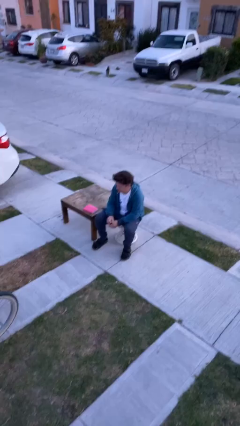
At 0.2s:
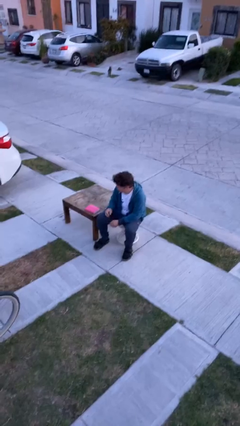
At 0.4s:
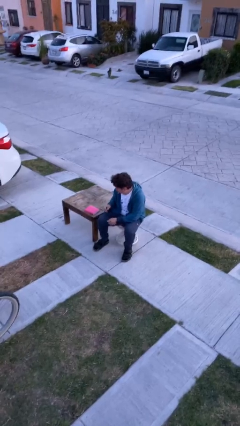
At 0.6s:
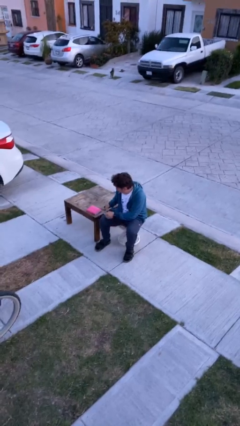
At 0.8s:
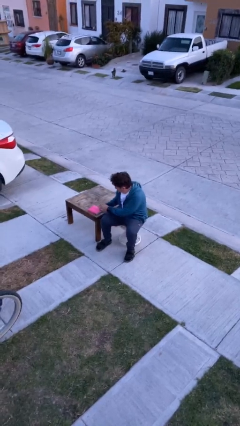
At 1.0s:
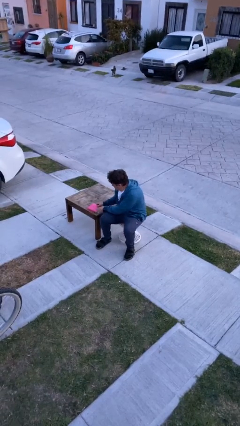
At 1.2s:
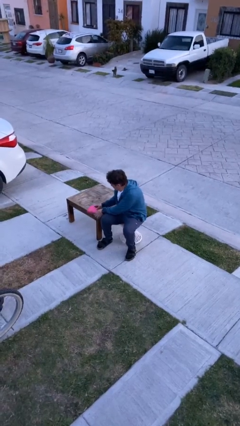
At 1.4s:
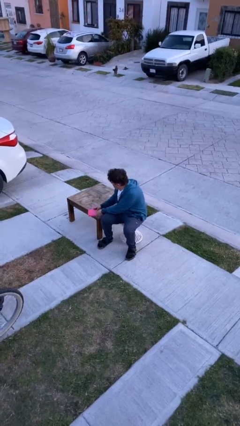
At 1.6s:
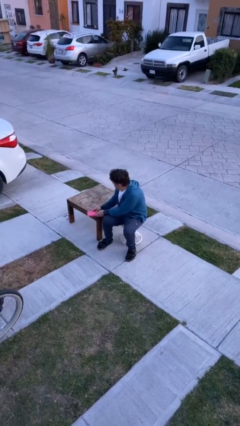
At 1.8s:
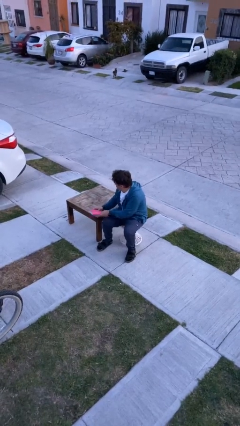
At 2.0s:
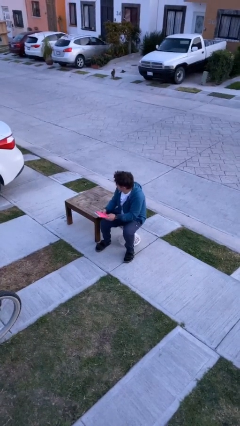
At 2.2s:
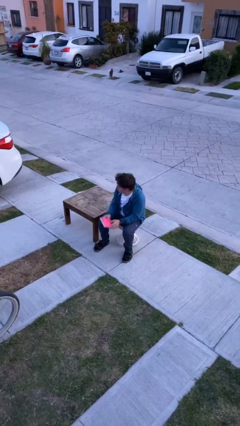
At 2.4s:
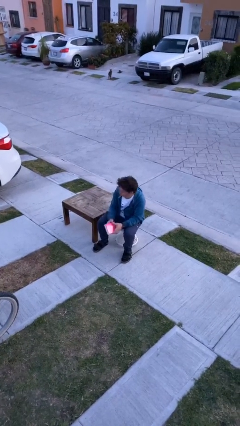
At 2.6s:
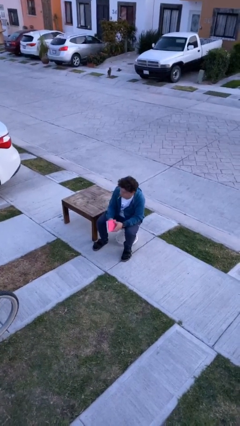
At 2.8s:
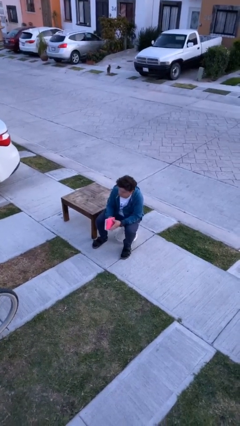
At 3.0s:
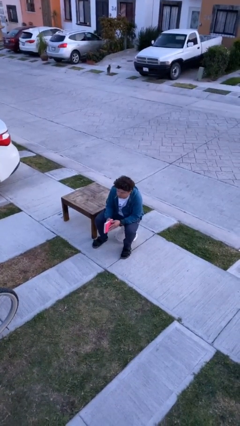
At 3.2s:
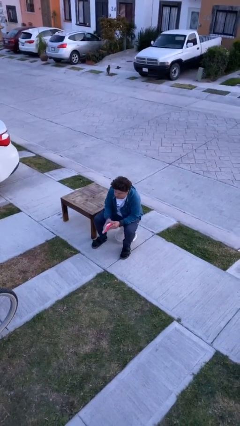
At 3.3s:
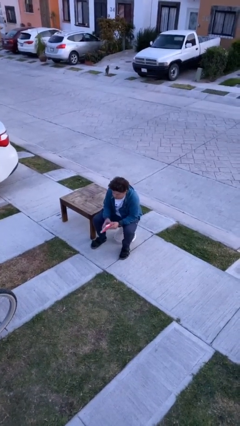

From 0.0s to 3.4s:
person picks up object from table

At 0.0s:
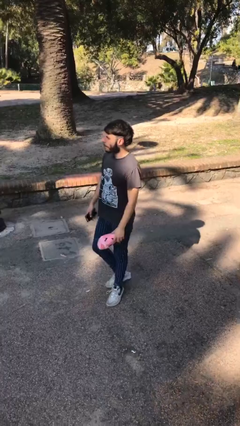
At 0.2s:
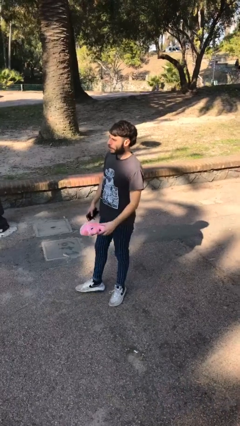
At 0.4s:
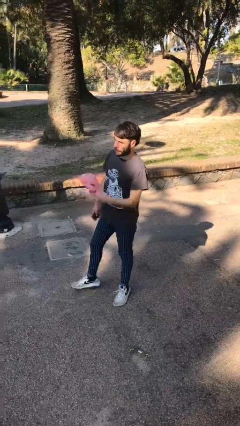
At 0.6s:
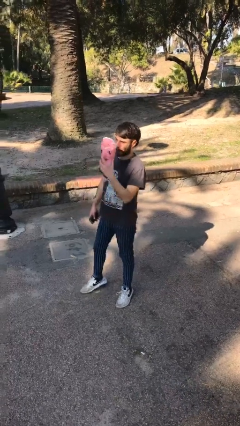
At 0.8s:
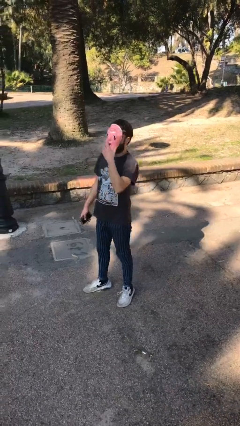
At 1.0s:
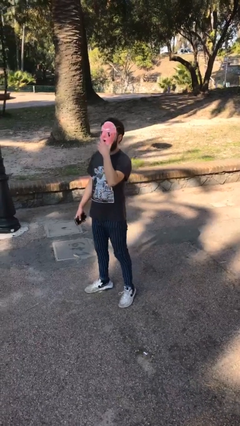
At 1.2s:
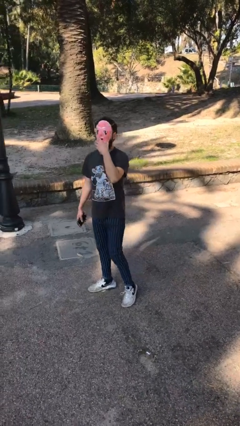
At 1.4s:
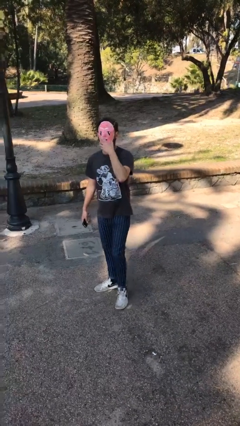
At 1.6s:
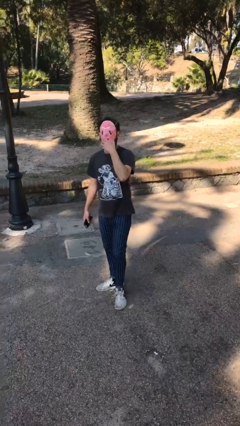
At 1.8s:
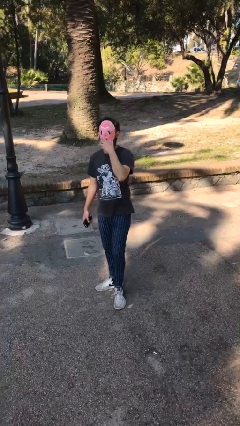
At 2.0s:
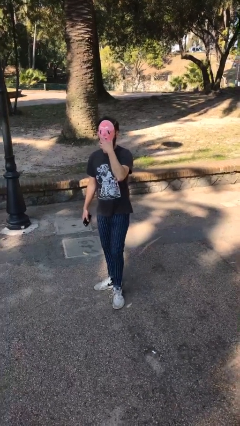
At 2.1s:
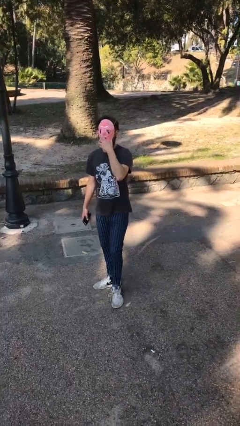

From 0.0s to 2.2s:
person puts on facemask

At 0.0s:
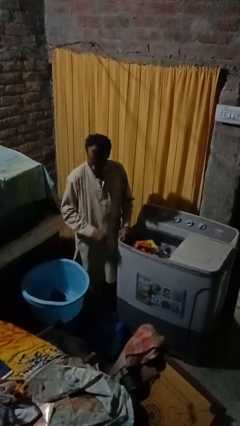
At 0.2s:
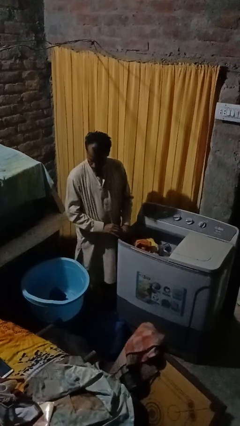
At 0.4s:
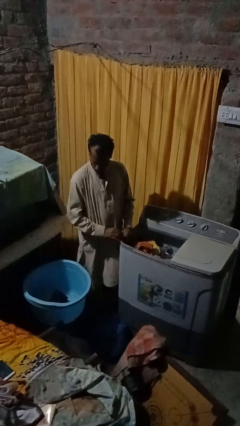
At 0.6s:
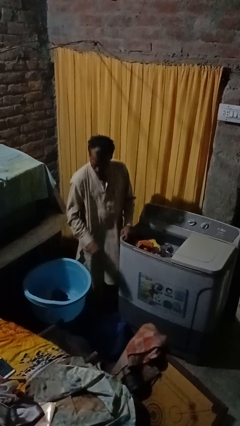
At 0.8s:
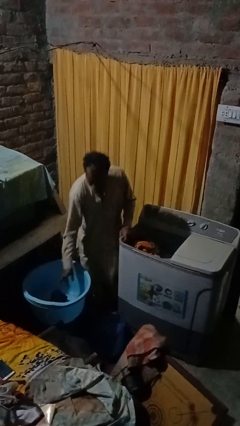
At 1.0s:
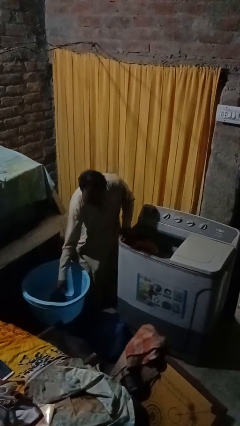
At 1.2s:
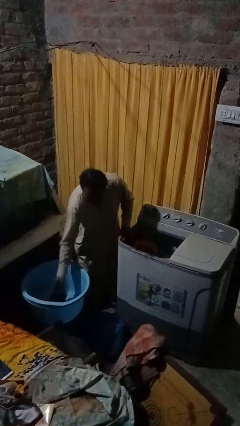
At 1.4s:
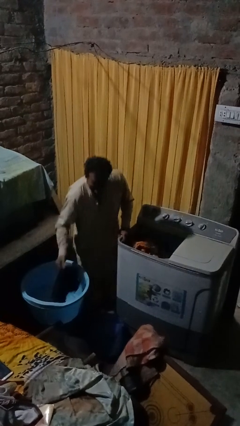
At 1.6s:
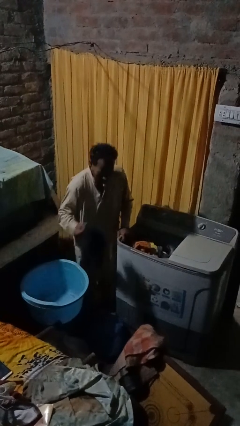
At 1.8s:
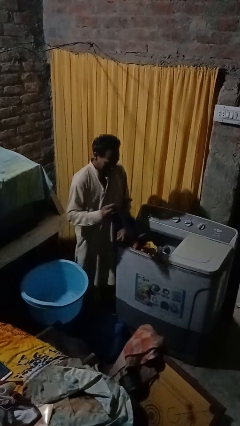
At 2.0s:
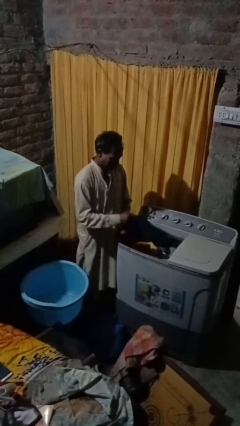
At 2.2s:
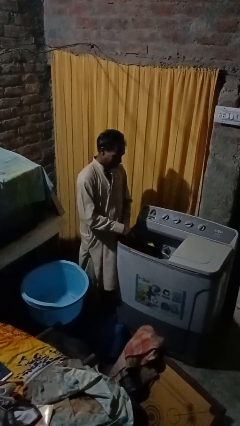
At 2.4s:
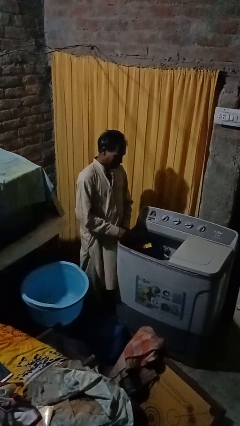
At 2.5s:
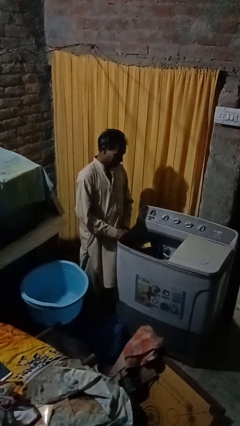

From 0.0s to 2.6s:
person loads clotheswasher

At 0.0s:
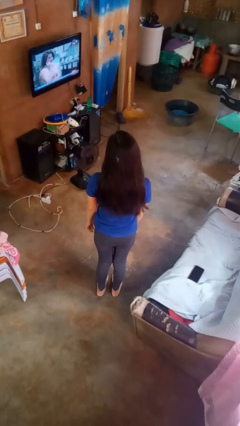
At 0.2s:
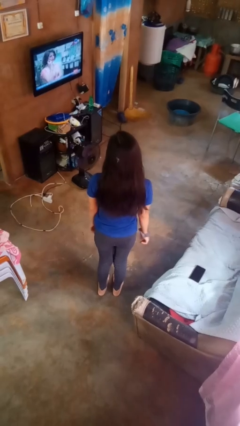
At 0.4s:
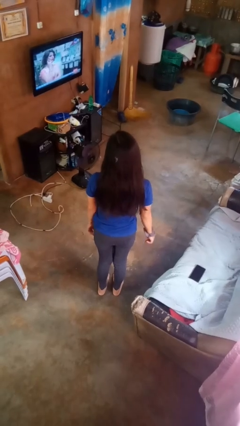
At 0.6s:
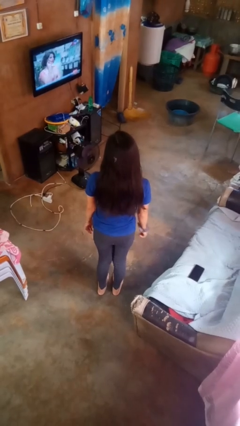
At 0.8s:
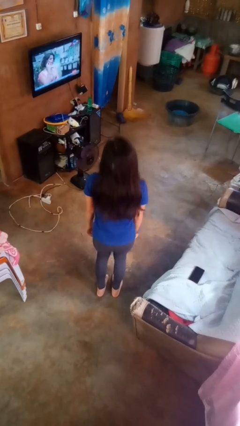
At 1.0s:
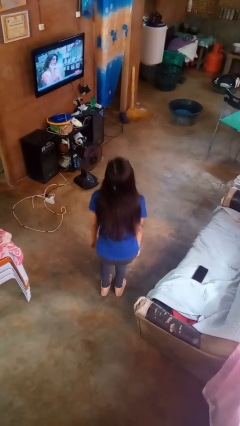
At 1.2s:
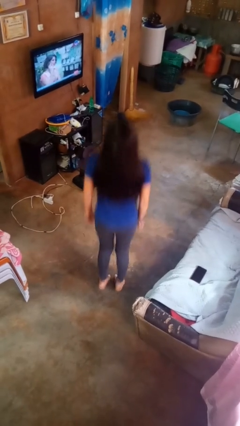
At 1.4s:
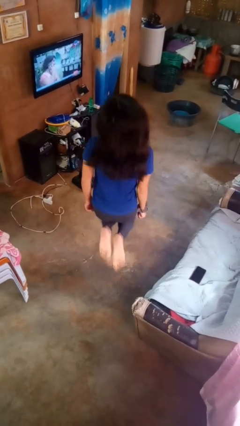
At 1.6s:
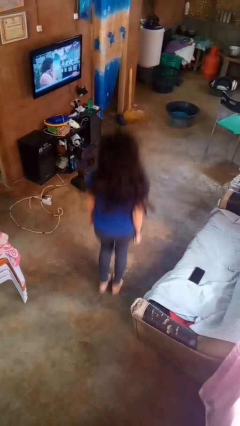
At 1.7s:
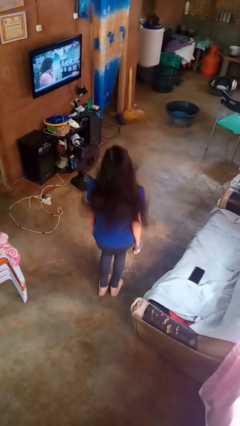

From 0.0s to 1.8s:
person jumps

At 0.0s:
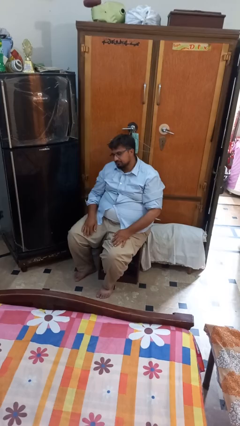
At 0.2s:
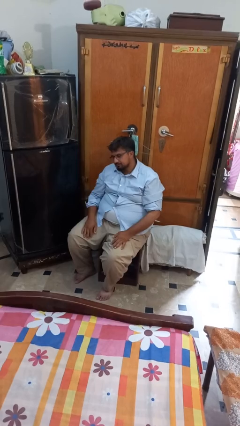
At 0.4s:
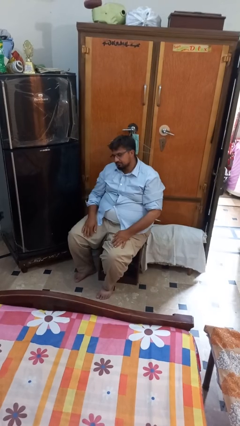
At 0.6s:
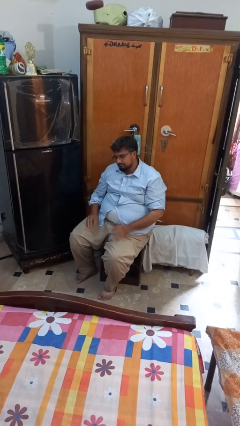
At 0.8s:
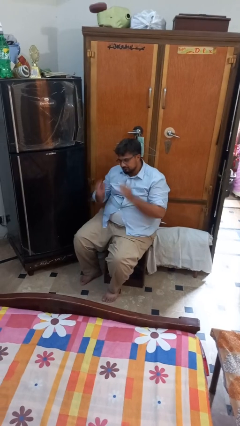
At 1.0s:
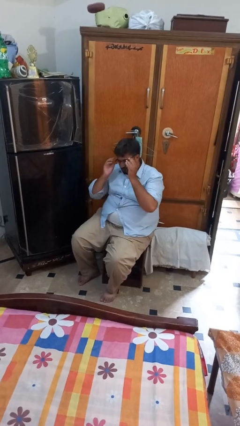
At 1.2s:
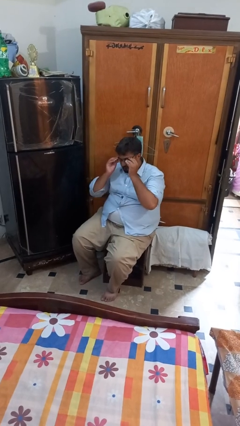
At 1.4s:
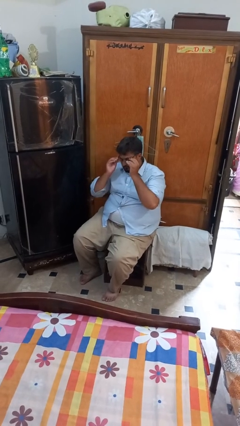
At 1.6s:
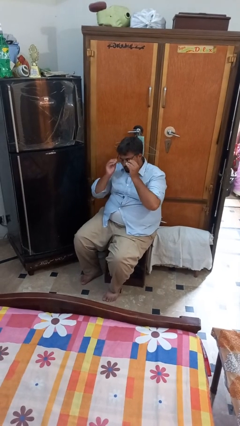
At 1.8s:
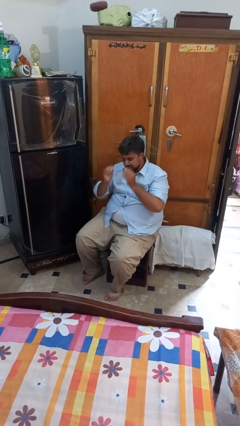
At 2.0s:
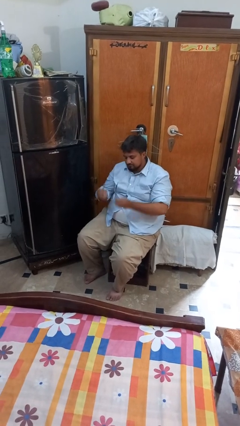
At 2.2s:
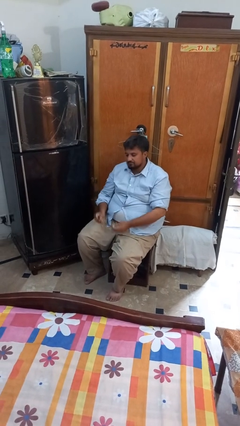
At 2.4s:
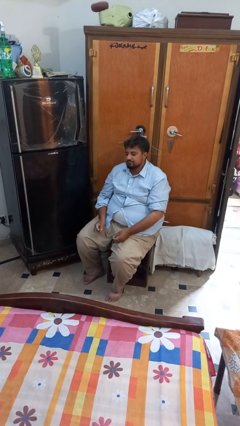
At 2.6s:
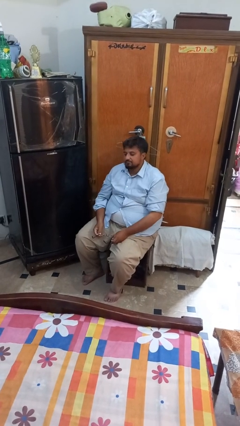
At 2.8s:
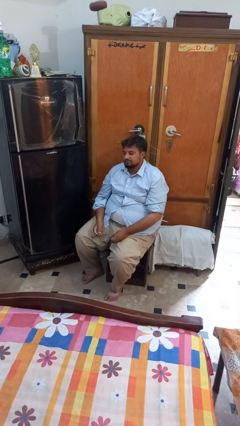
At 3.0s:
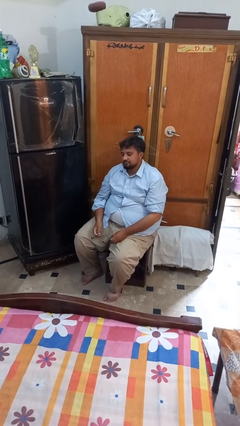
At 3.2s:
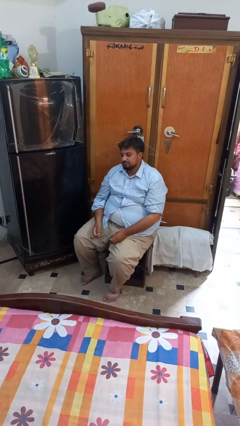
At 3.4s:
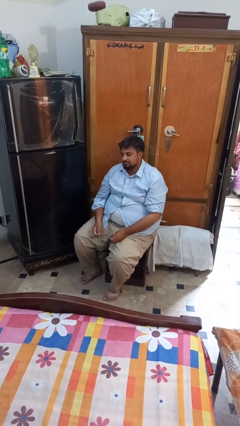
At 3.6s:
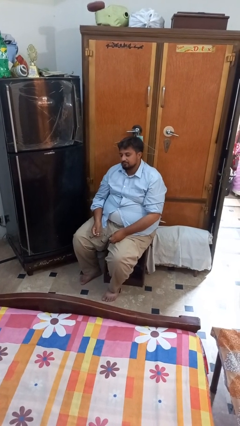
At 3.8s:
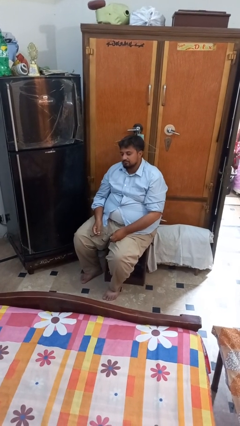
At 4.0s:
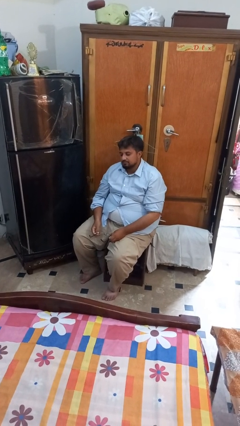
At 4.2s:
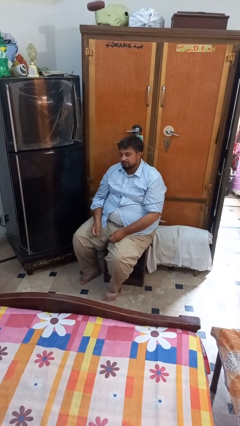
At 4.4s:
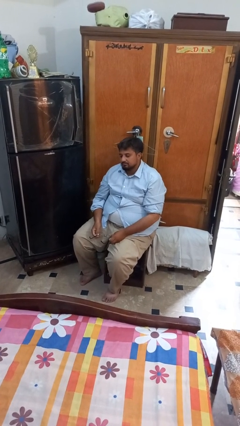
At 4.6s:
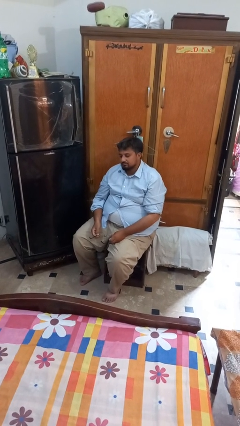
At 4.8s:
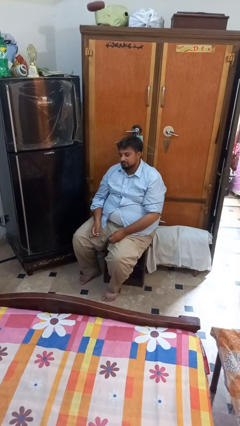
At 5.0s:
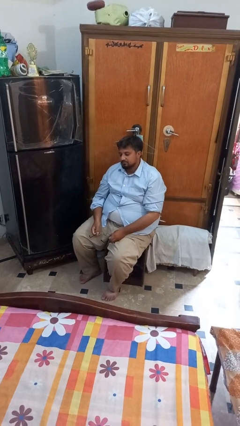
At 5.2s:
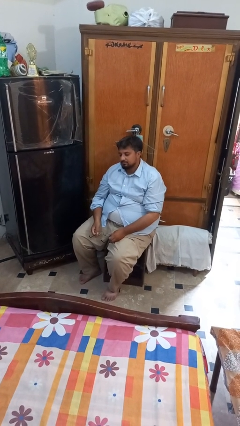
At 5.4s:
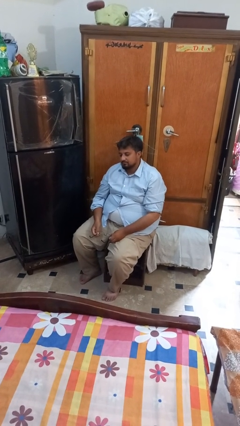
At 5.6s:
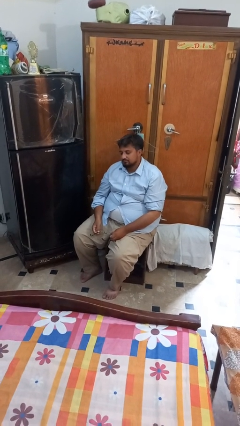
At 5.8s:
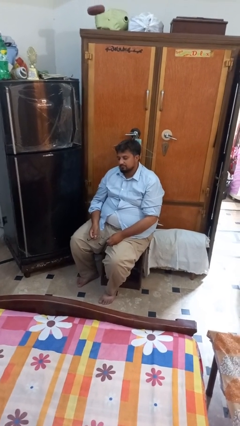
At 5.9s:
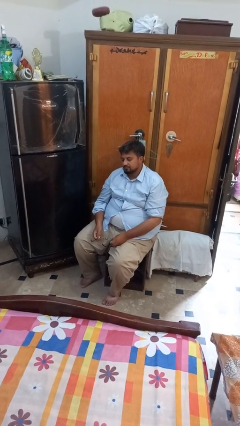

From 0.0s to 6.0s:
person takes off glasses

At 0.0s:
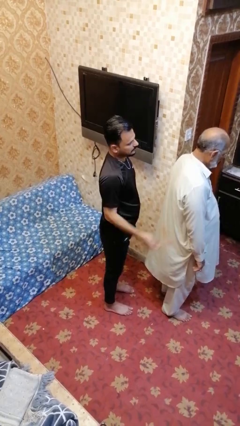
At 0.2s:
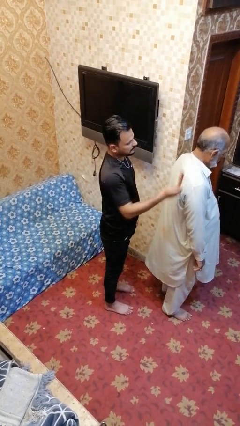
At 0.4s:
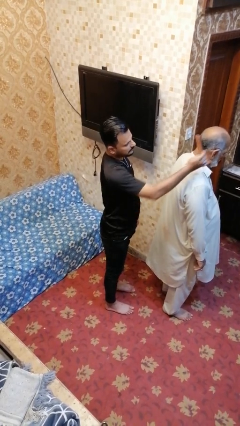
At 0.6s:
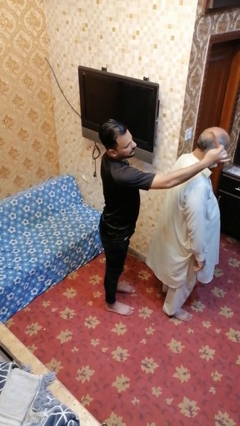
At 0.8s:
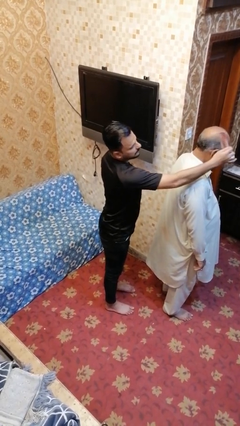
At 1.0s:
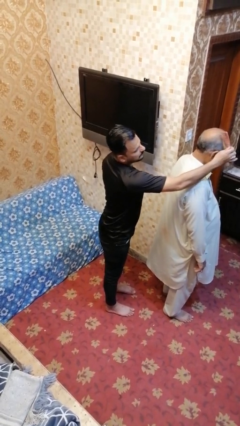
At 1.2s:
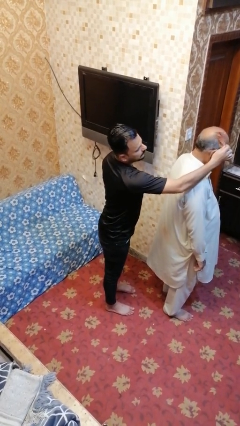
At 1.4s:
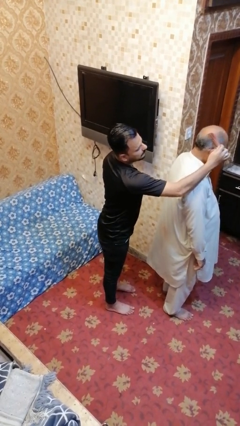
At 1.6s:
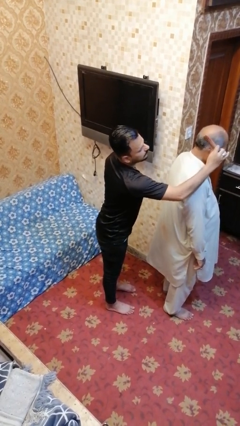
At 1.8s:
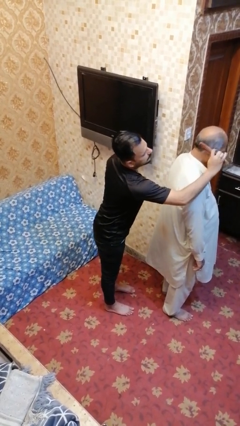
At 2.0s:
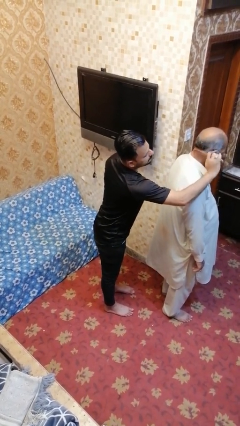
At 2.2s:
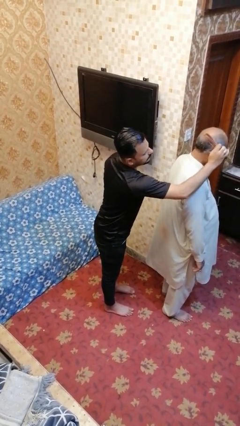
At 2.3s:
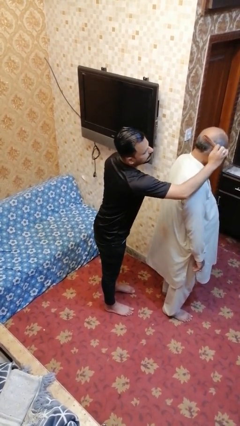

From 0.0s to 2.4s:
person brushes hair of person
